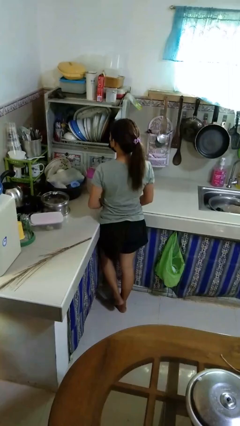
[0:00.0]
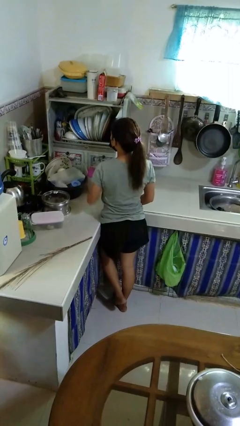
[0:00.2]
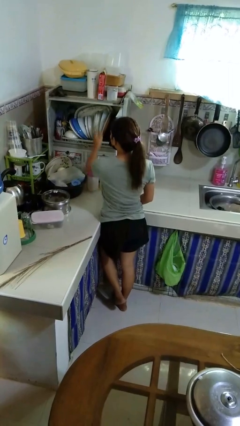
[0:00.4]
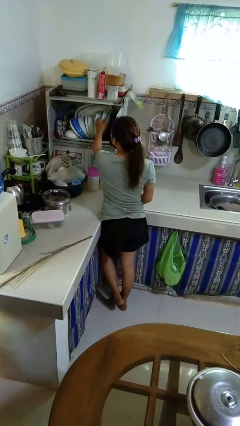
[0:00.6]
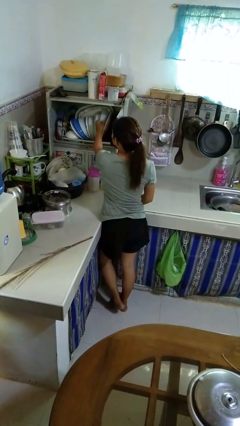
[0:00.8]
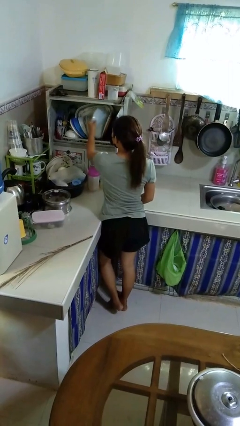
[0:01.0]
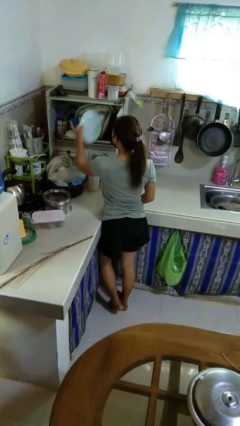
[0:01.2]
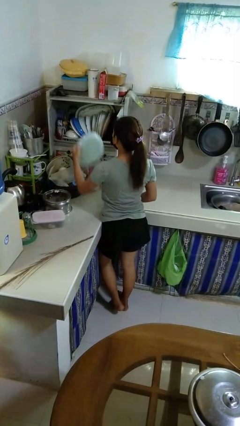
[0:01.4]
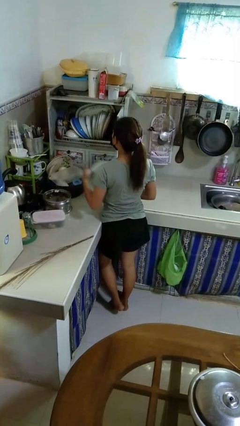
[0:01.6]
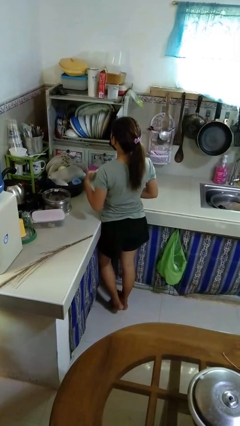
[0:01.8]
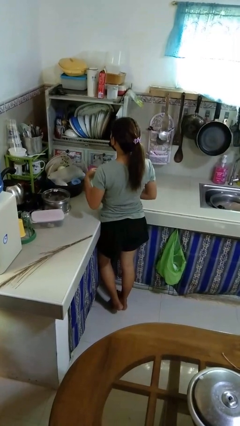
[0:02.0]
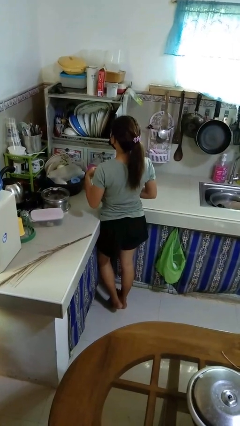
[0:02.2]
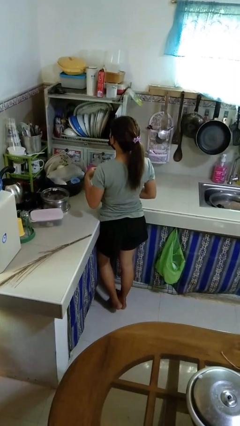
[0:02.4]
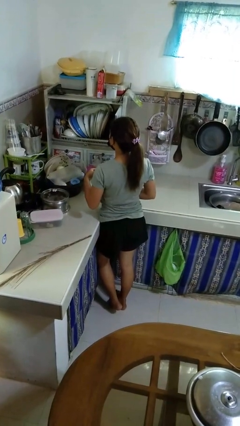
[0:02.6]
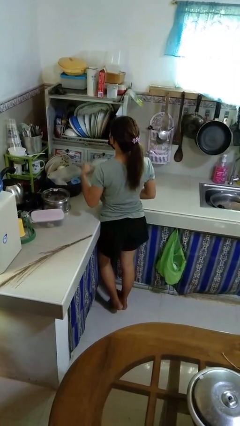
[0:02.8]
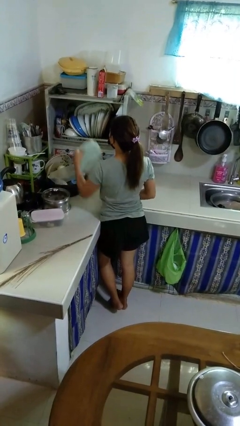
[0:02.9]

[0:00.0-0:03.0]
person takes object from kitchen drawer

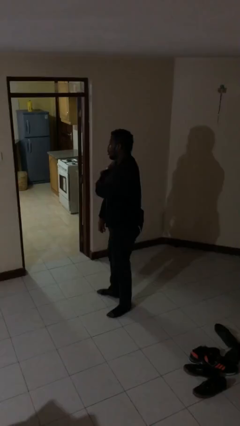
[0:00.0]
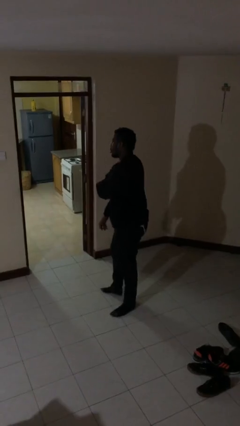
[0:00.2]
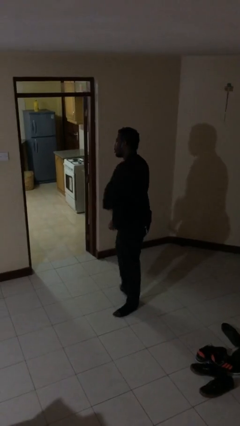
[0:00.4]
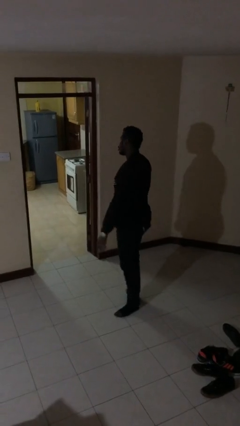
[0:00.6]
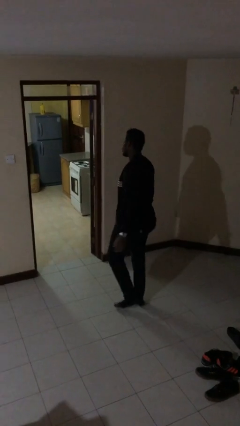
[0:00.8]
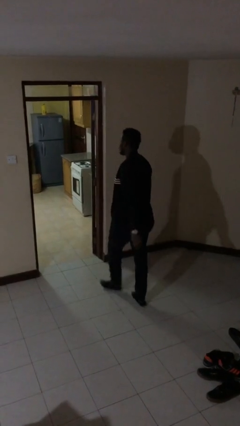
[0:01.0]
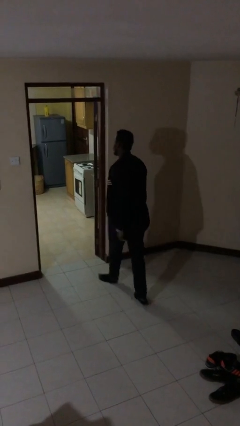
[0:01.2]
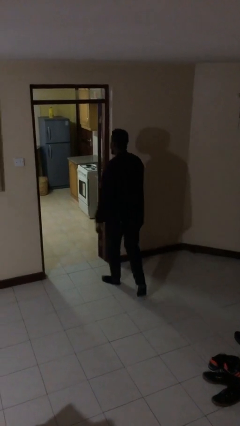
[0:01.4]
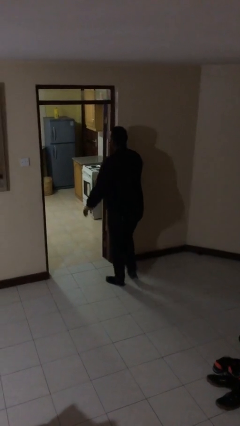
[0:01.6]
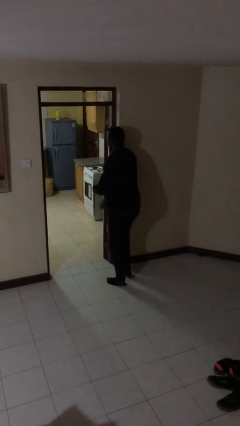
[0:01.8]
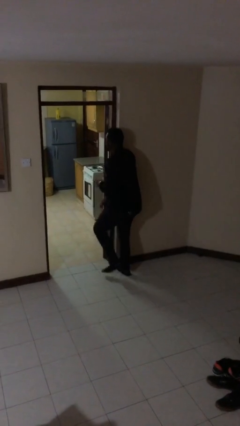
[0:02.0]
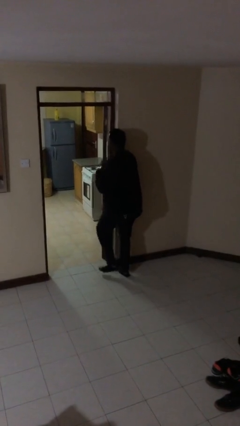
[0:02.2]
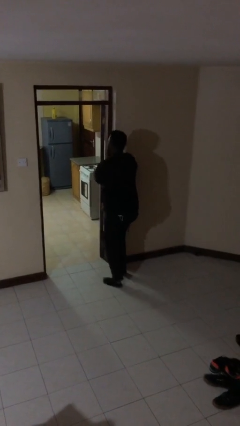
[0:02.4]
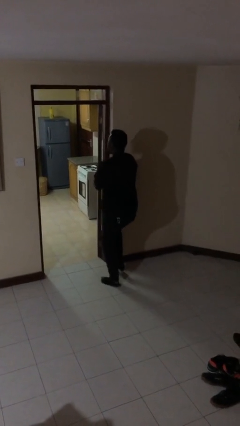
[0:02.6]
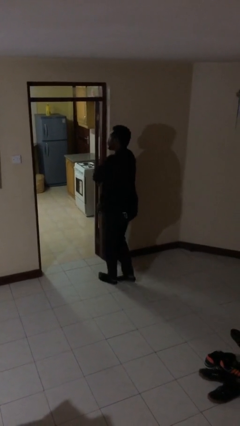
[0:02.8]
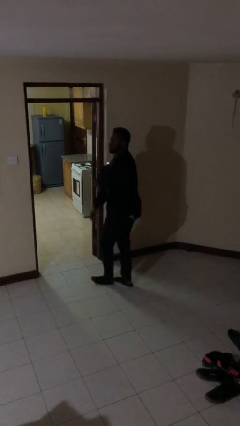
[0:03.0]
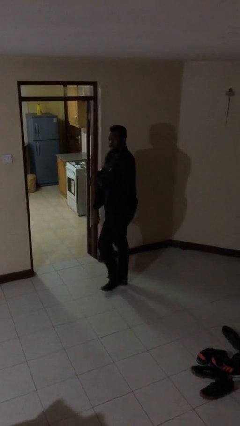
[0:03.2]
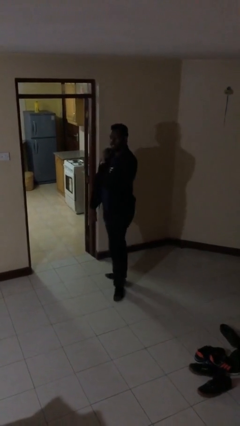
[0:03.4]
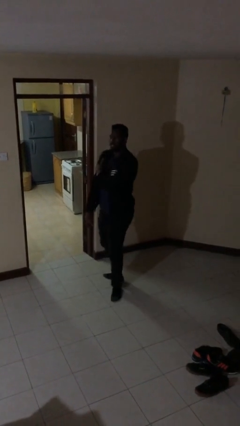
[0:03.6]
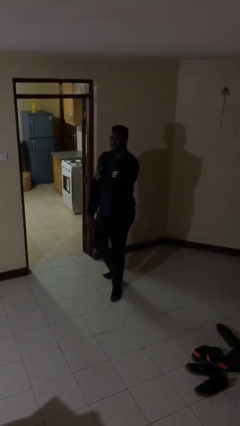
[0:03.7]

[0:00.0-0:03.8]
person bumps into wall

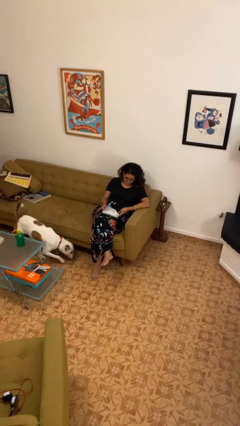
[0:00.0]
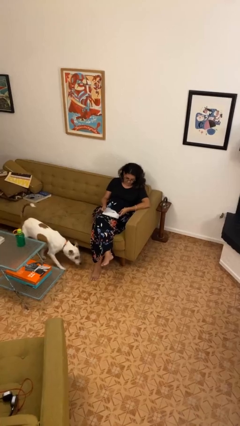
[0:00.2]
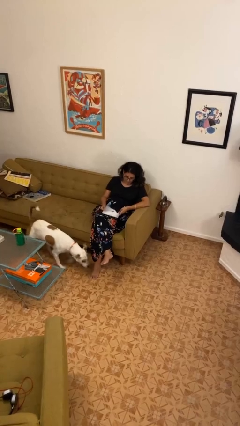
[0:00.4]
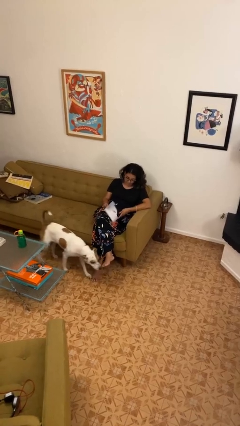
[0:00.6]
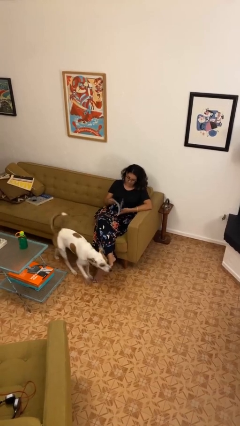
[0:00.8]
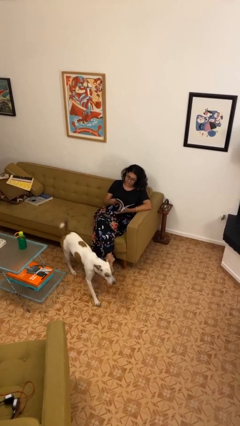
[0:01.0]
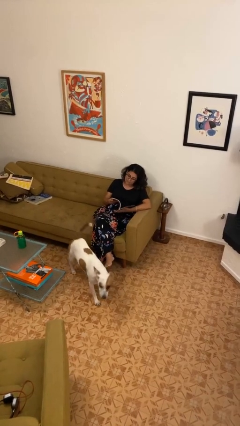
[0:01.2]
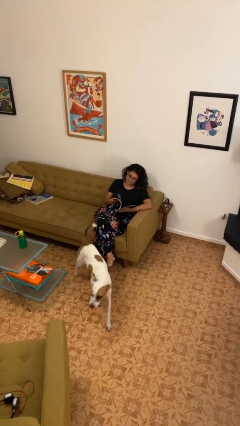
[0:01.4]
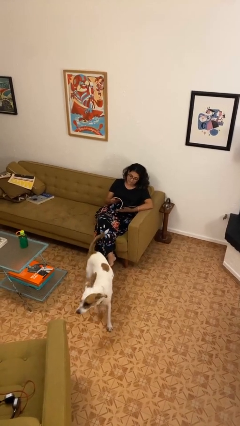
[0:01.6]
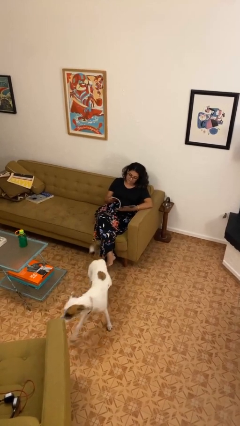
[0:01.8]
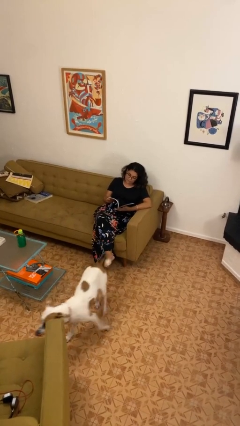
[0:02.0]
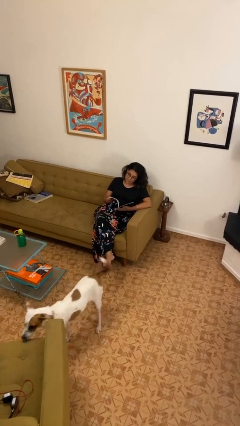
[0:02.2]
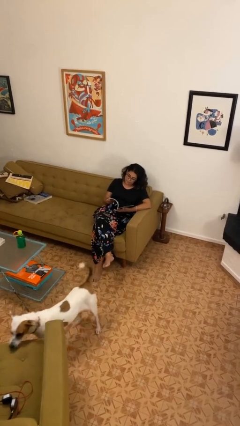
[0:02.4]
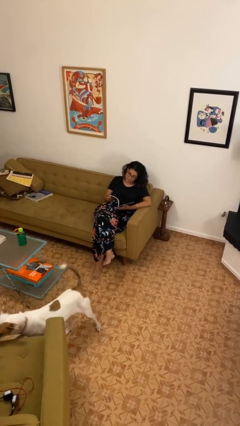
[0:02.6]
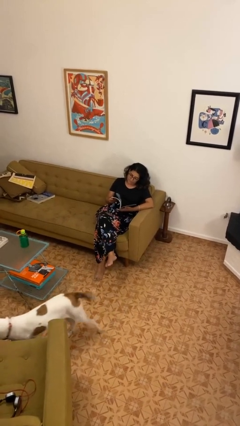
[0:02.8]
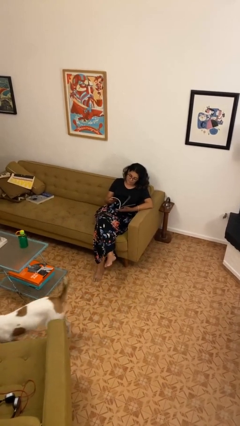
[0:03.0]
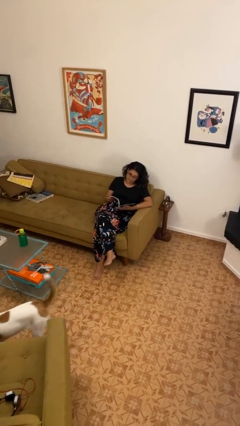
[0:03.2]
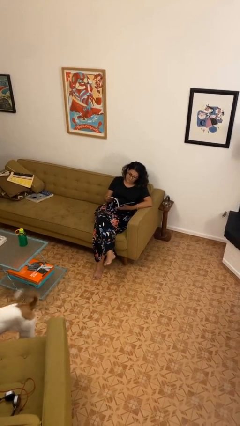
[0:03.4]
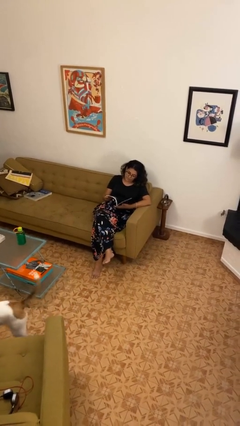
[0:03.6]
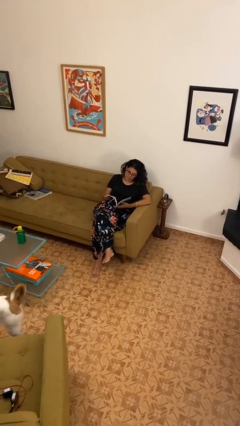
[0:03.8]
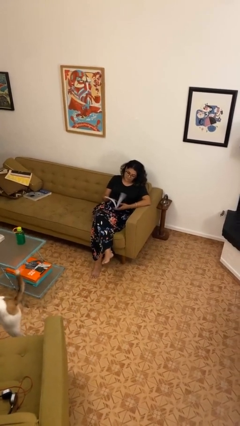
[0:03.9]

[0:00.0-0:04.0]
person reads magazine

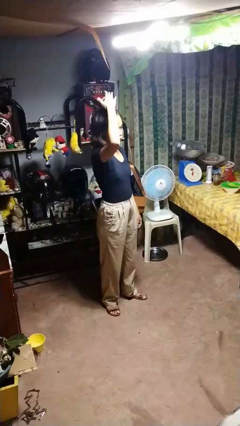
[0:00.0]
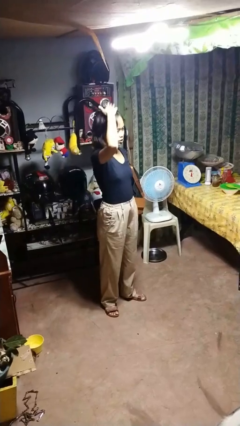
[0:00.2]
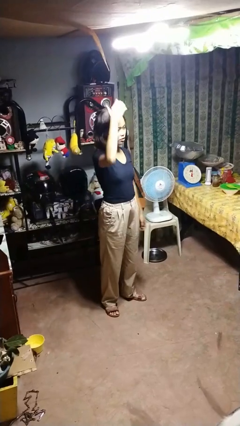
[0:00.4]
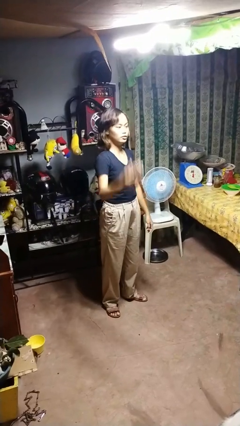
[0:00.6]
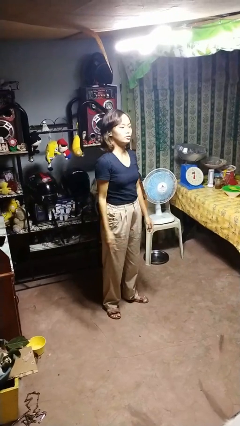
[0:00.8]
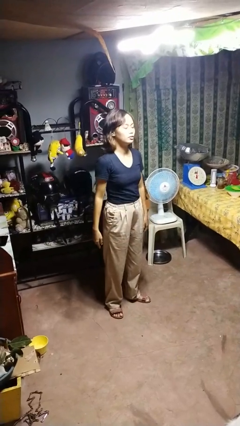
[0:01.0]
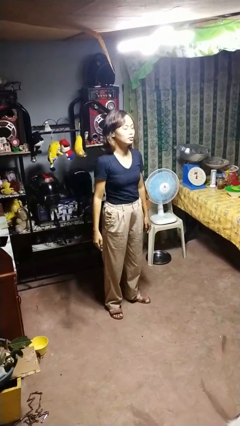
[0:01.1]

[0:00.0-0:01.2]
person pats head

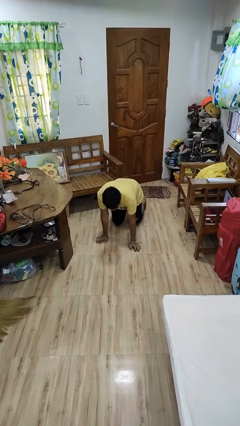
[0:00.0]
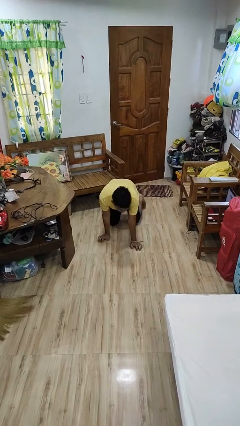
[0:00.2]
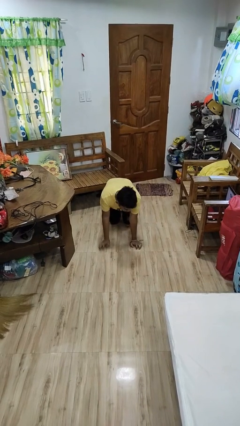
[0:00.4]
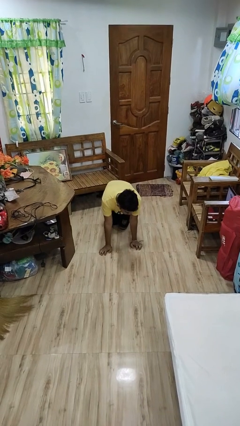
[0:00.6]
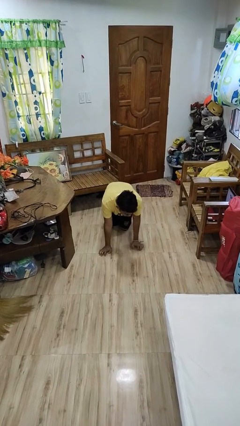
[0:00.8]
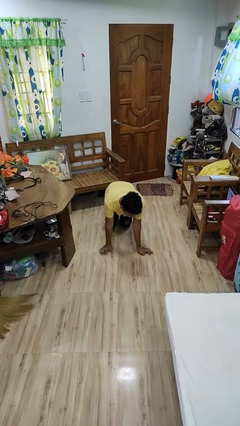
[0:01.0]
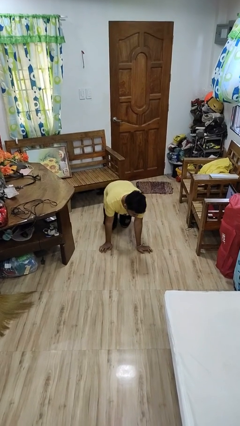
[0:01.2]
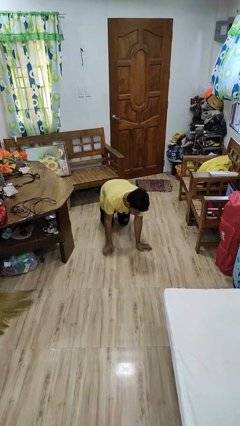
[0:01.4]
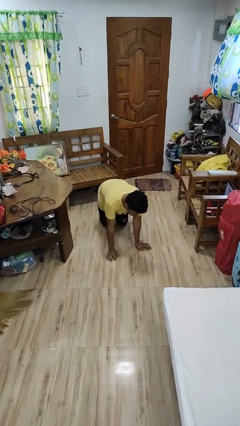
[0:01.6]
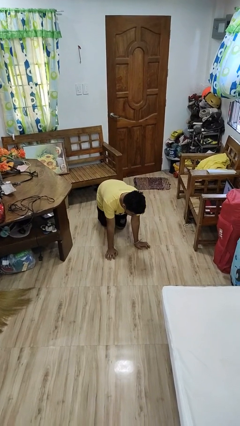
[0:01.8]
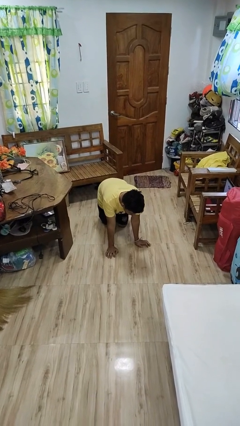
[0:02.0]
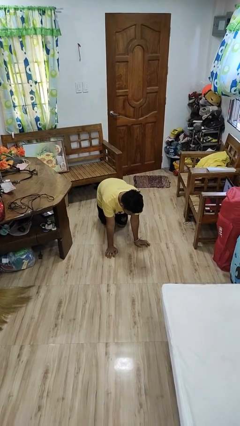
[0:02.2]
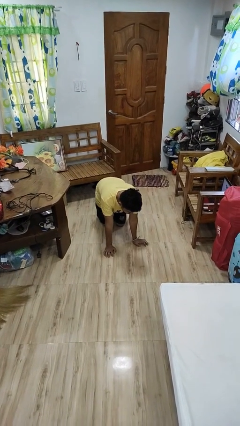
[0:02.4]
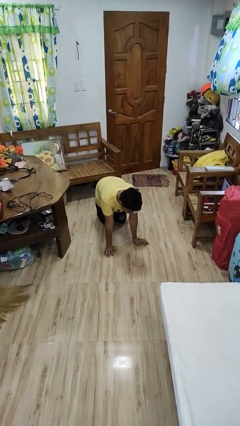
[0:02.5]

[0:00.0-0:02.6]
person crawls

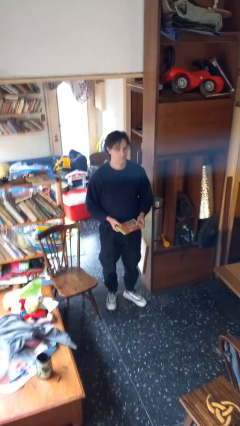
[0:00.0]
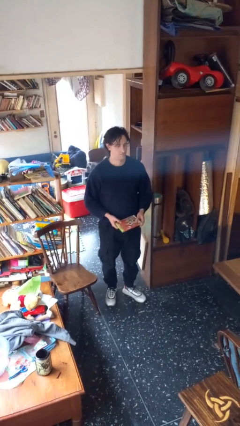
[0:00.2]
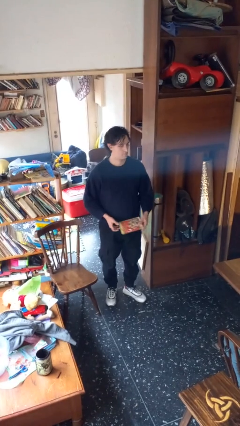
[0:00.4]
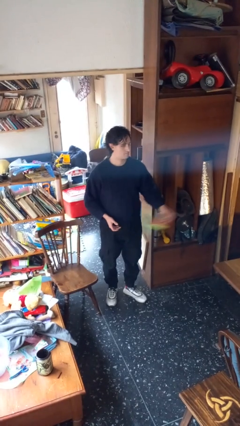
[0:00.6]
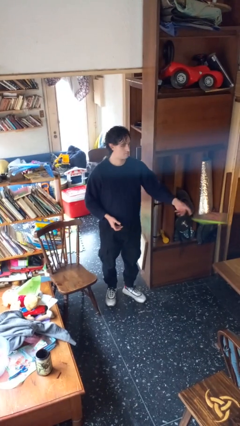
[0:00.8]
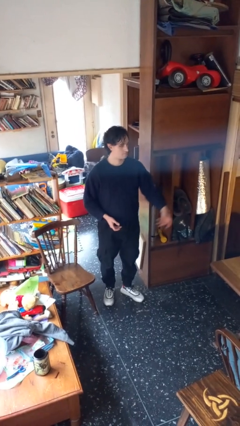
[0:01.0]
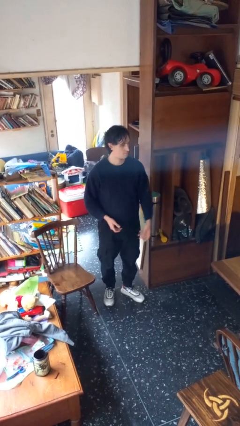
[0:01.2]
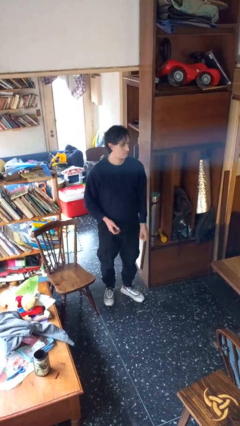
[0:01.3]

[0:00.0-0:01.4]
person throws object on table

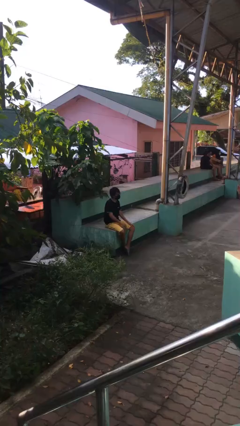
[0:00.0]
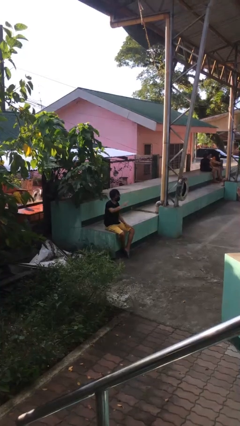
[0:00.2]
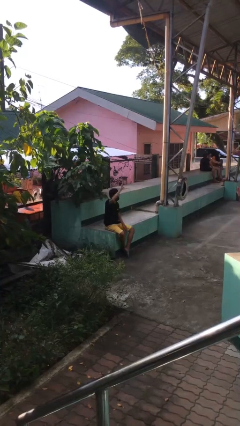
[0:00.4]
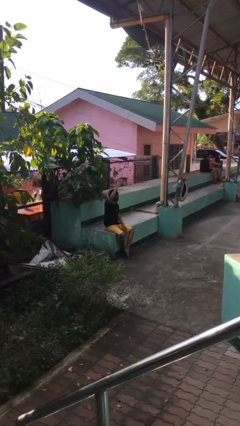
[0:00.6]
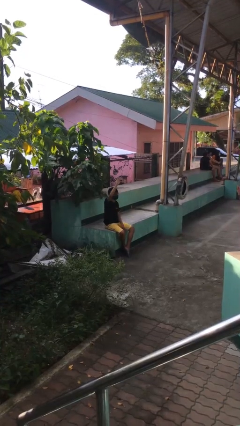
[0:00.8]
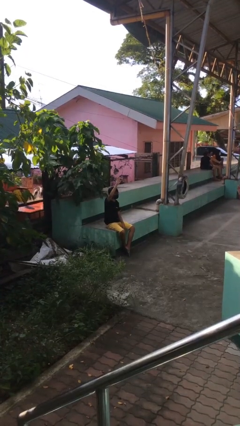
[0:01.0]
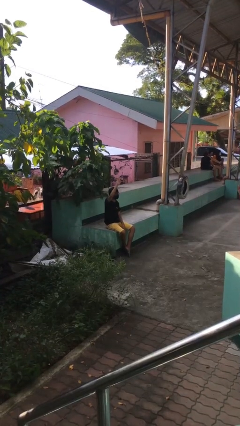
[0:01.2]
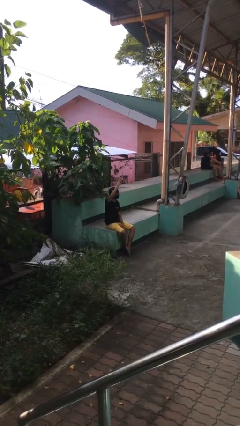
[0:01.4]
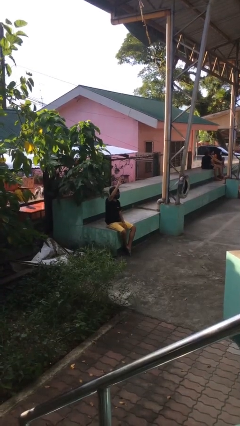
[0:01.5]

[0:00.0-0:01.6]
person gestures raise hand
